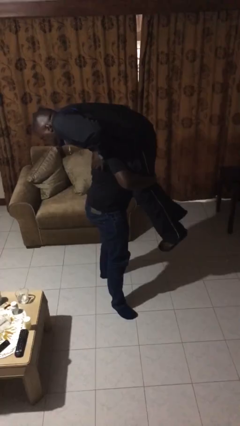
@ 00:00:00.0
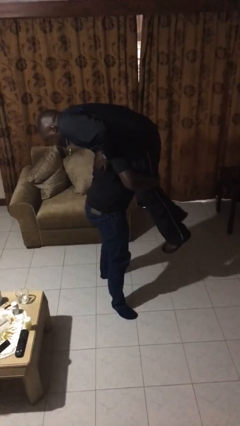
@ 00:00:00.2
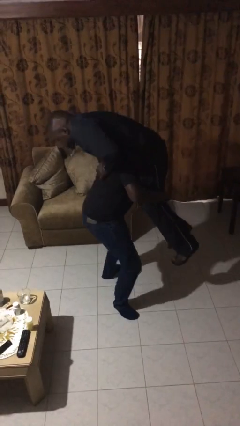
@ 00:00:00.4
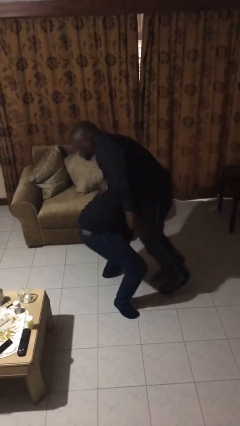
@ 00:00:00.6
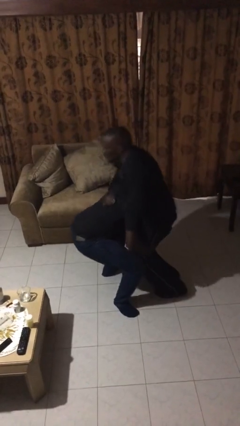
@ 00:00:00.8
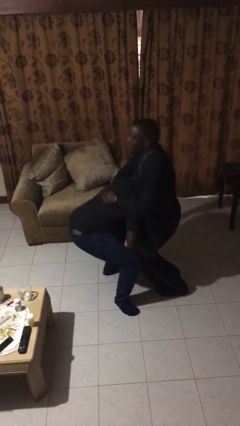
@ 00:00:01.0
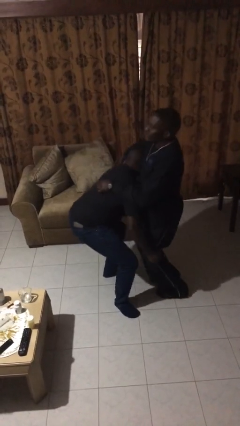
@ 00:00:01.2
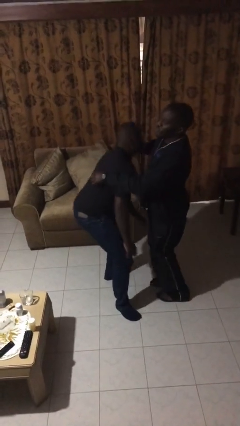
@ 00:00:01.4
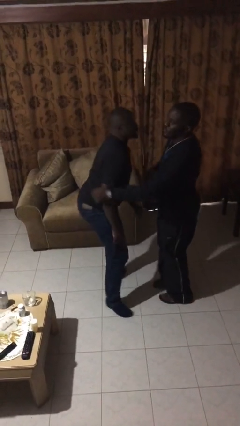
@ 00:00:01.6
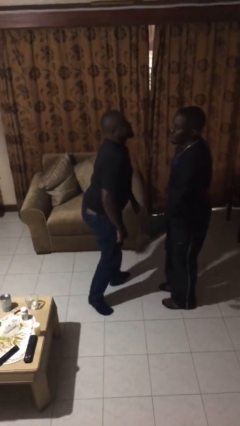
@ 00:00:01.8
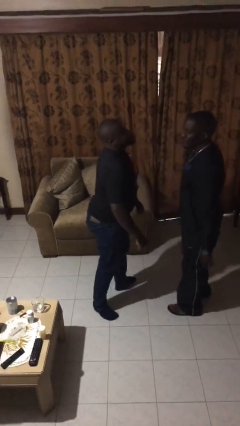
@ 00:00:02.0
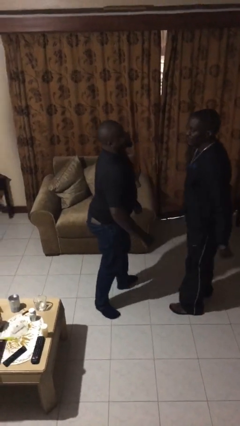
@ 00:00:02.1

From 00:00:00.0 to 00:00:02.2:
person puts down person

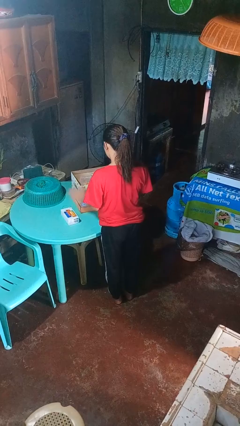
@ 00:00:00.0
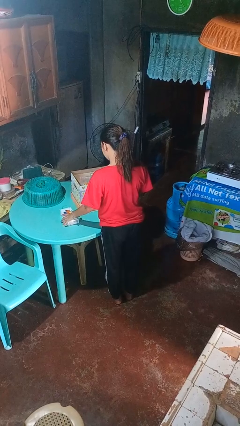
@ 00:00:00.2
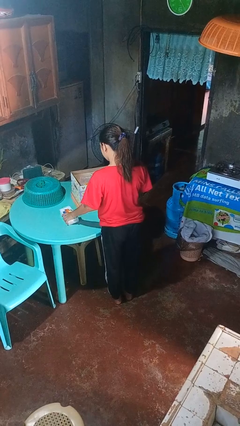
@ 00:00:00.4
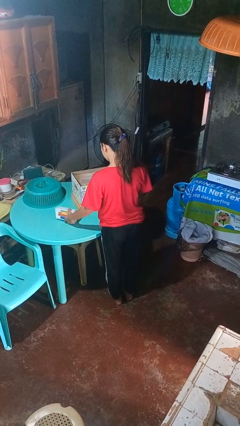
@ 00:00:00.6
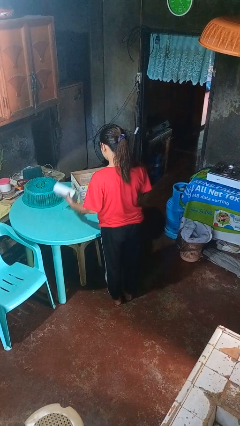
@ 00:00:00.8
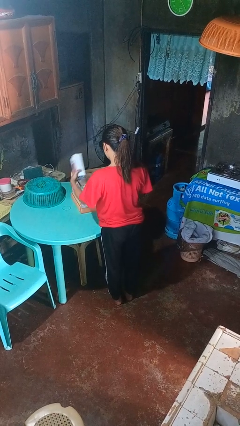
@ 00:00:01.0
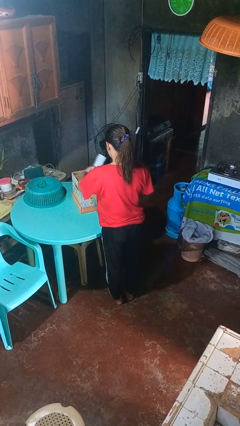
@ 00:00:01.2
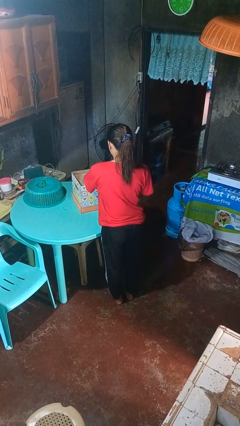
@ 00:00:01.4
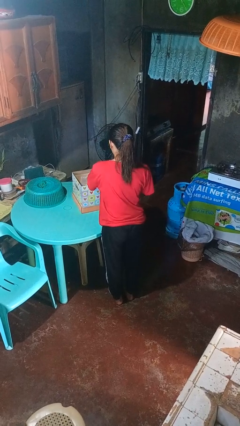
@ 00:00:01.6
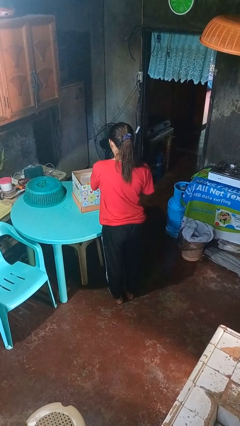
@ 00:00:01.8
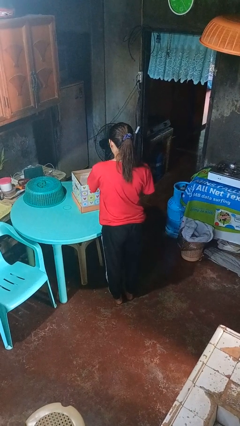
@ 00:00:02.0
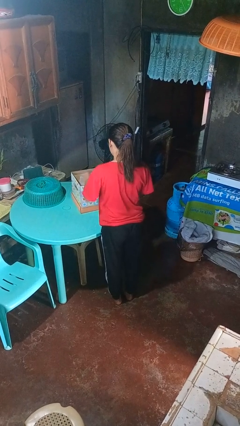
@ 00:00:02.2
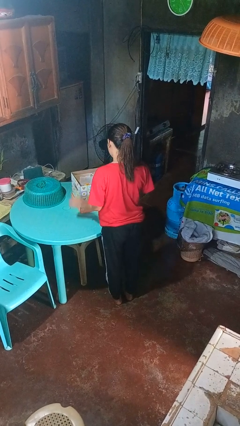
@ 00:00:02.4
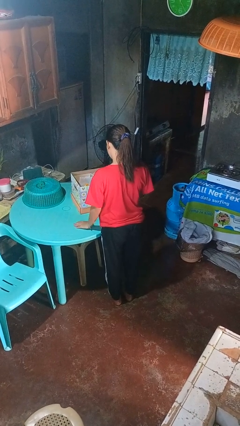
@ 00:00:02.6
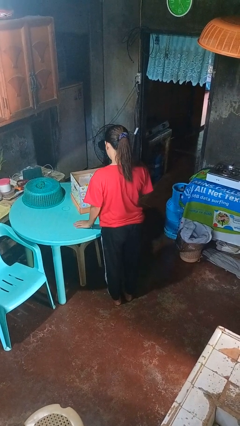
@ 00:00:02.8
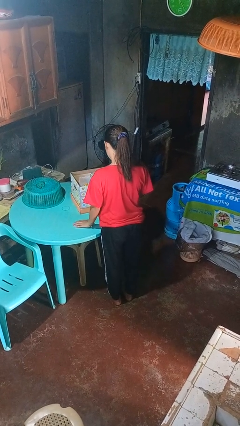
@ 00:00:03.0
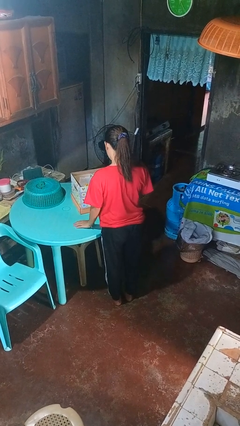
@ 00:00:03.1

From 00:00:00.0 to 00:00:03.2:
person puts object into box

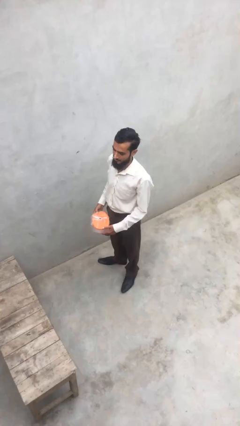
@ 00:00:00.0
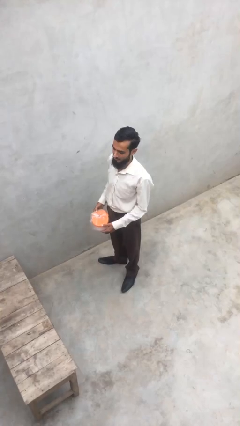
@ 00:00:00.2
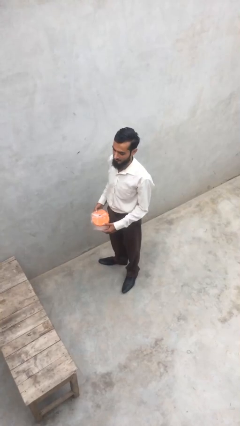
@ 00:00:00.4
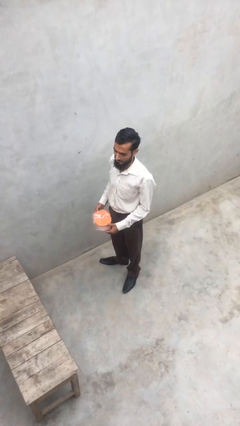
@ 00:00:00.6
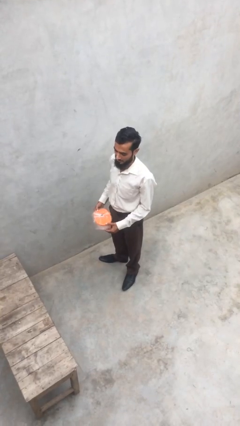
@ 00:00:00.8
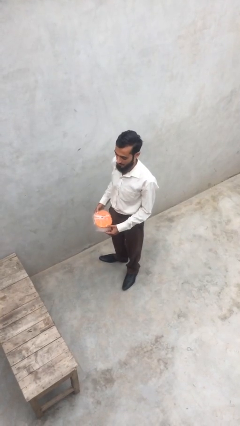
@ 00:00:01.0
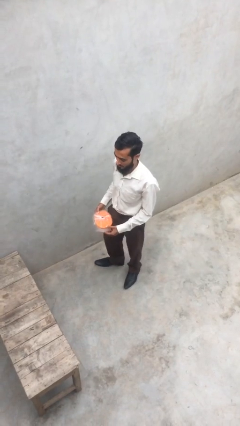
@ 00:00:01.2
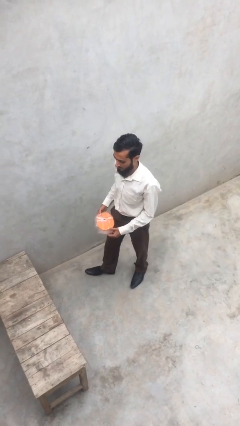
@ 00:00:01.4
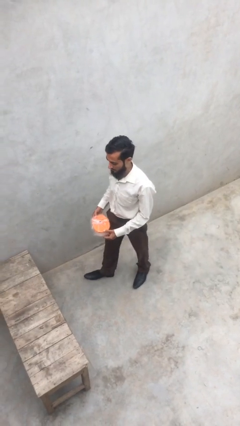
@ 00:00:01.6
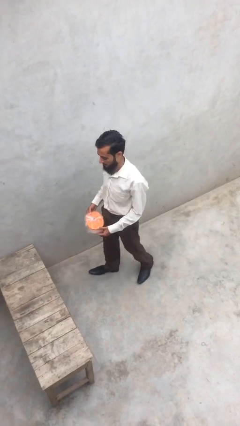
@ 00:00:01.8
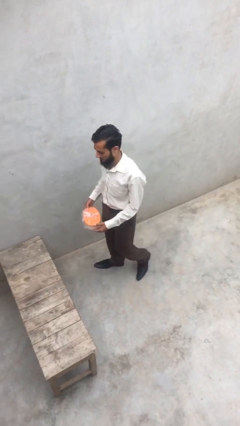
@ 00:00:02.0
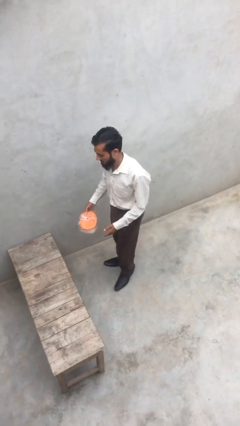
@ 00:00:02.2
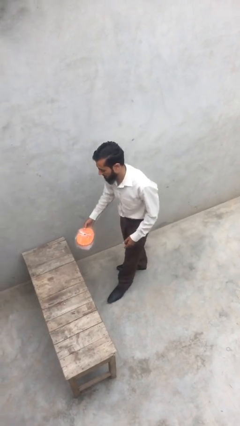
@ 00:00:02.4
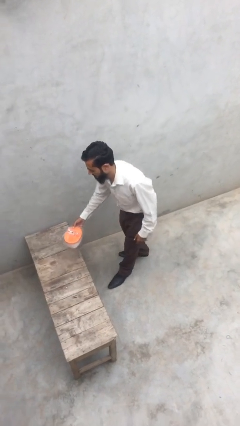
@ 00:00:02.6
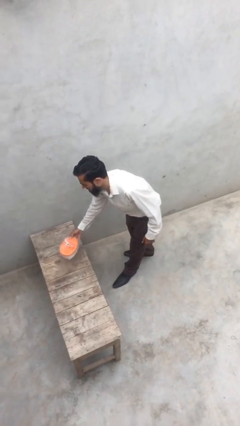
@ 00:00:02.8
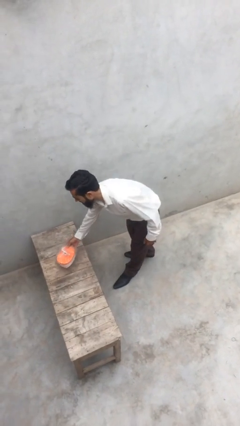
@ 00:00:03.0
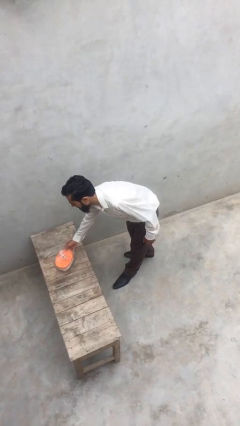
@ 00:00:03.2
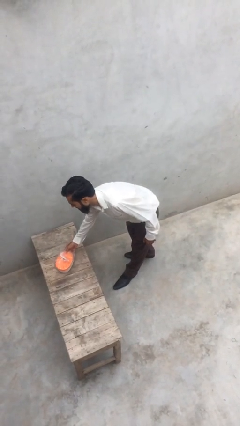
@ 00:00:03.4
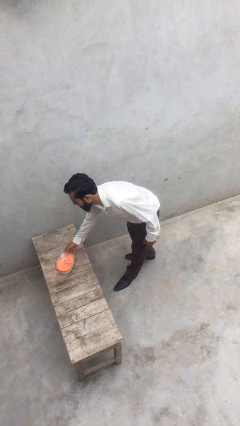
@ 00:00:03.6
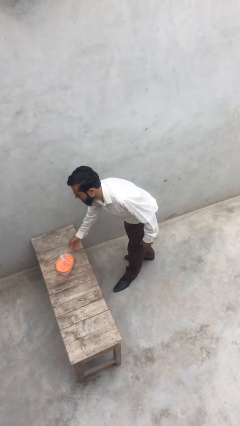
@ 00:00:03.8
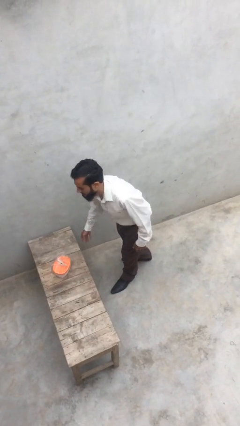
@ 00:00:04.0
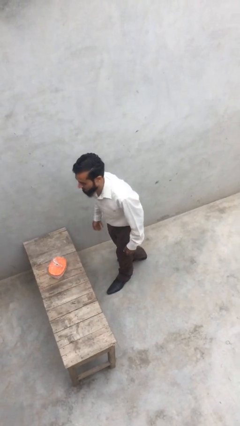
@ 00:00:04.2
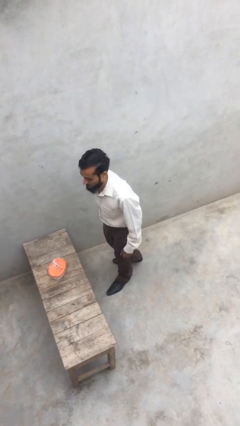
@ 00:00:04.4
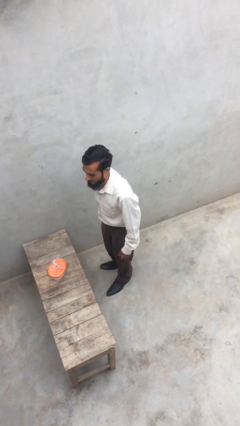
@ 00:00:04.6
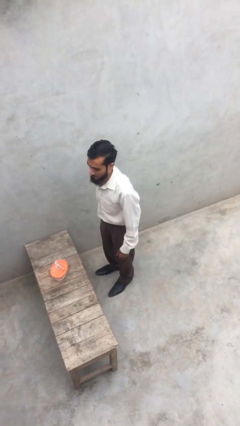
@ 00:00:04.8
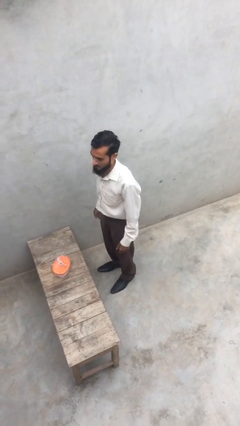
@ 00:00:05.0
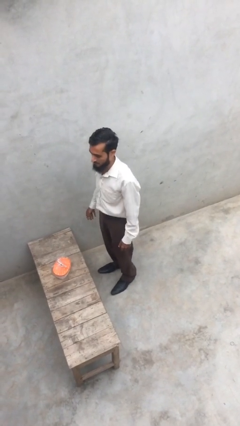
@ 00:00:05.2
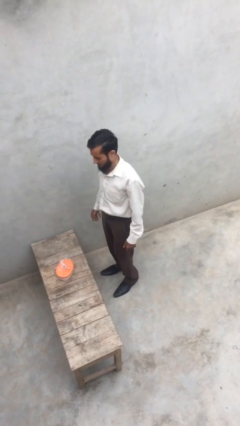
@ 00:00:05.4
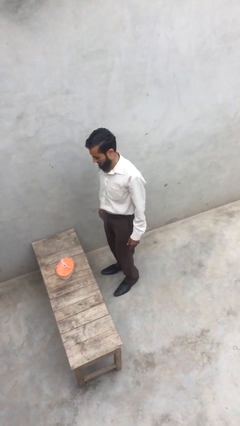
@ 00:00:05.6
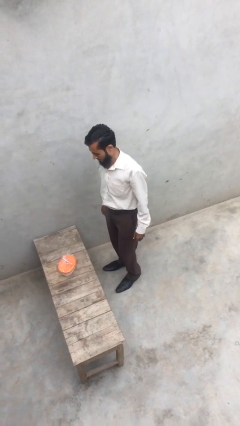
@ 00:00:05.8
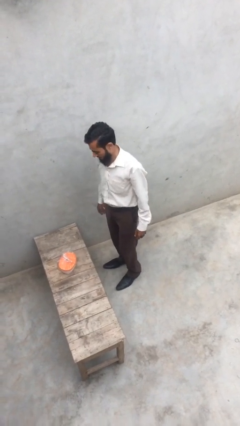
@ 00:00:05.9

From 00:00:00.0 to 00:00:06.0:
person puts down object on table

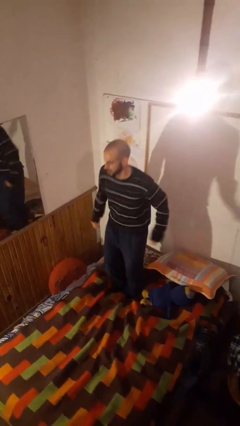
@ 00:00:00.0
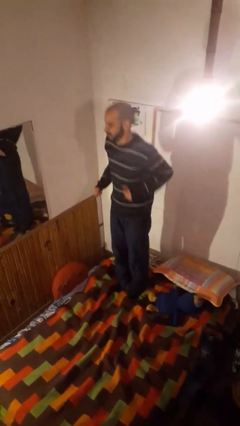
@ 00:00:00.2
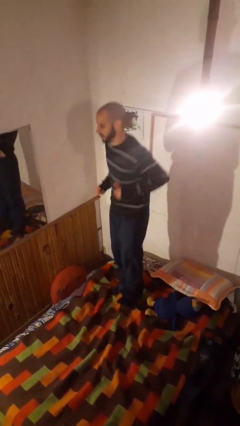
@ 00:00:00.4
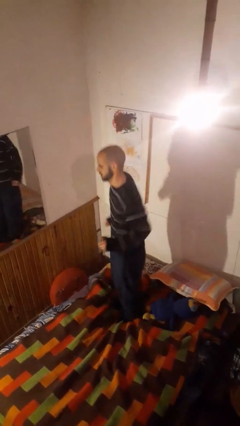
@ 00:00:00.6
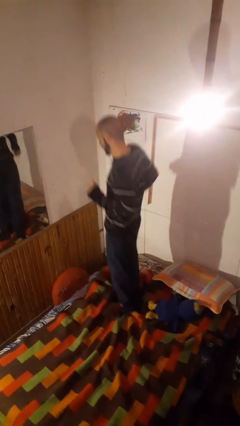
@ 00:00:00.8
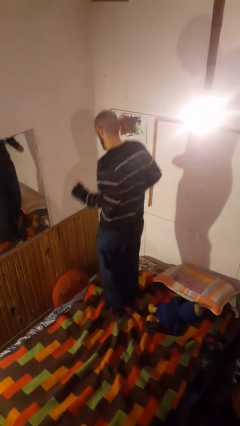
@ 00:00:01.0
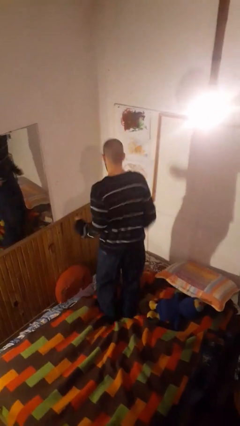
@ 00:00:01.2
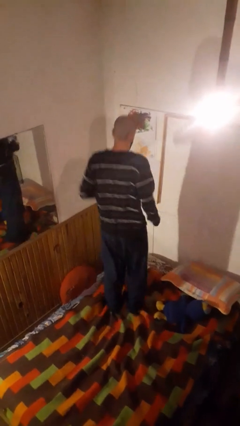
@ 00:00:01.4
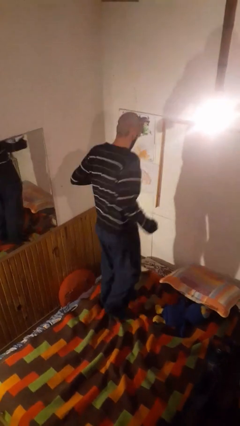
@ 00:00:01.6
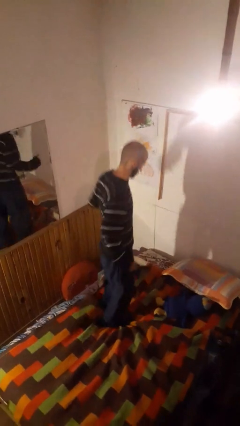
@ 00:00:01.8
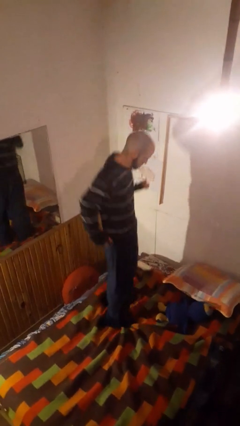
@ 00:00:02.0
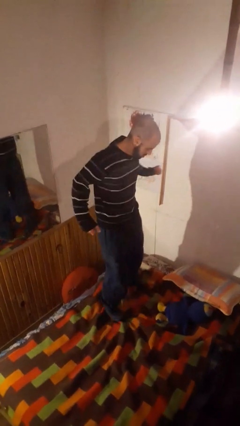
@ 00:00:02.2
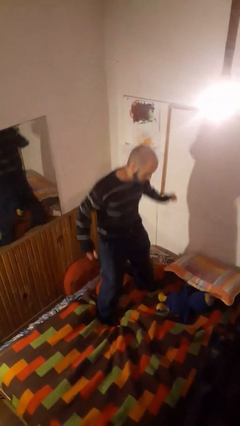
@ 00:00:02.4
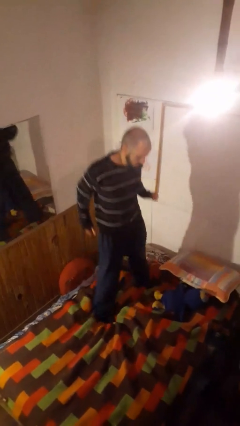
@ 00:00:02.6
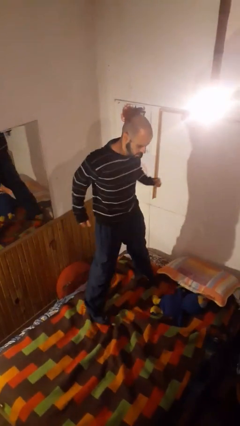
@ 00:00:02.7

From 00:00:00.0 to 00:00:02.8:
person jumps on bed

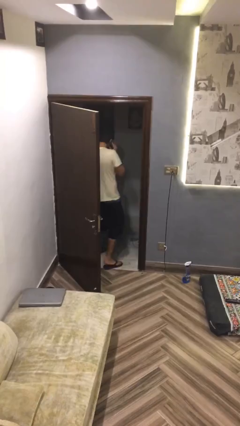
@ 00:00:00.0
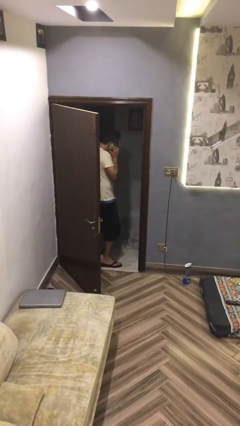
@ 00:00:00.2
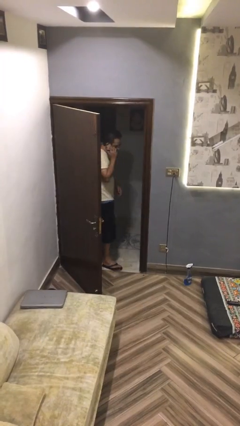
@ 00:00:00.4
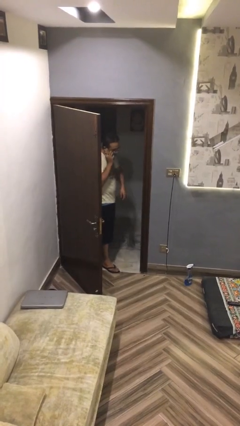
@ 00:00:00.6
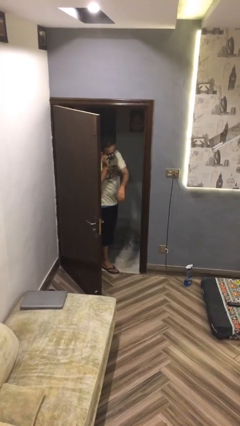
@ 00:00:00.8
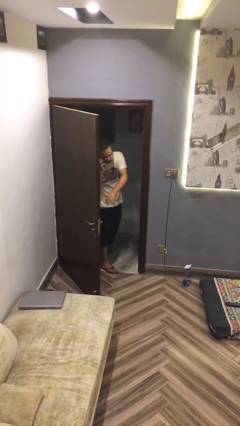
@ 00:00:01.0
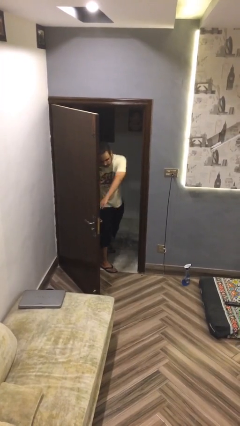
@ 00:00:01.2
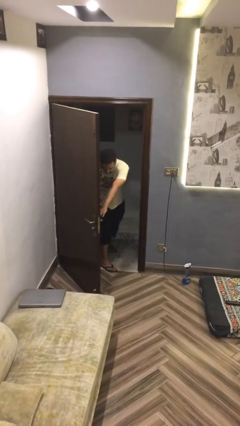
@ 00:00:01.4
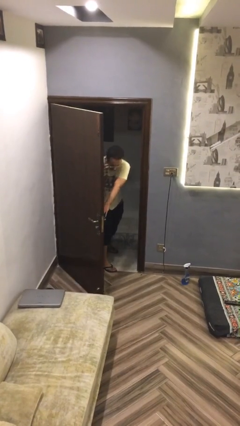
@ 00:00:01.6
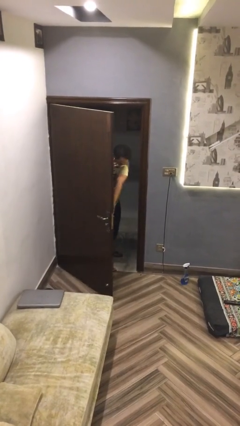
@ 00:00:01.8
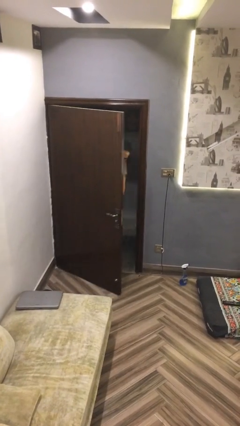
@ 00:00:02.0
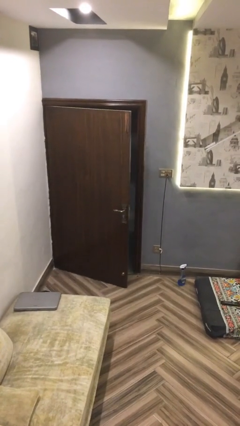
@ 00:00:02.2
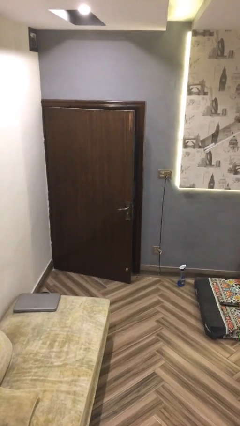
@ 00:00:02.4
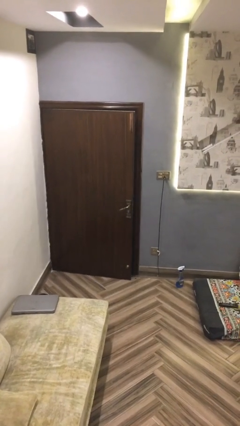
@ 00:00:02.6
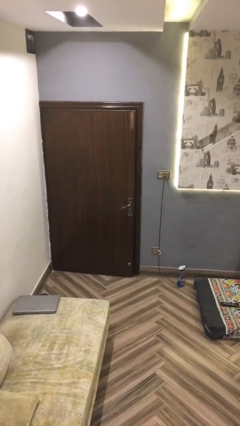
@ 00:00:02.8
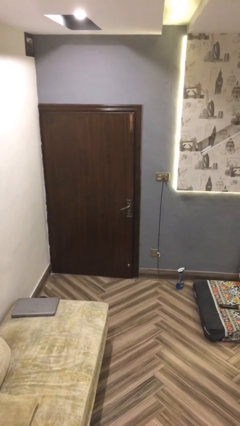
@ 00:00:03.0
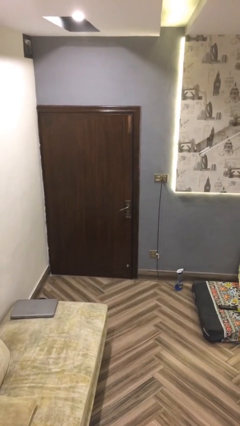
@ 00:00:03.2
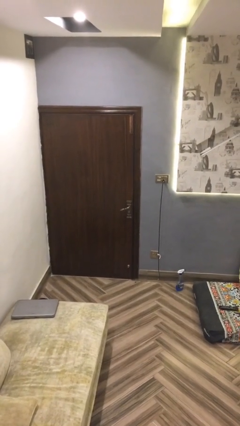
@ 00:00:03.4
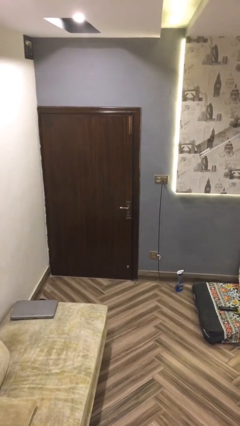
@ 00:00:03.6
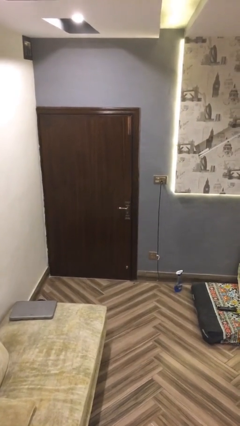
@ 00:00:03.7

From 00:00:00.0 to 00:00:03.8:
person closes facility door
